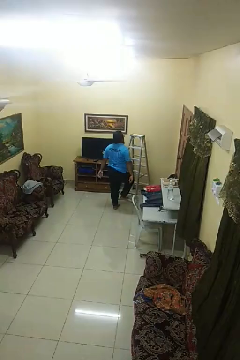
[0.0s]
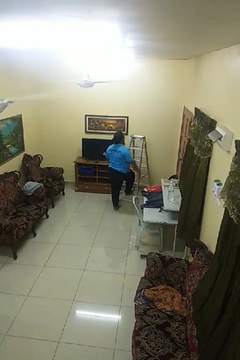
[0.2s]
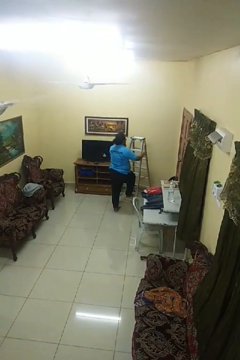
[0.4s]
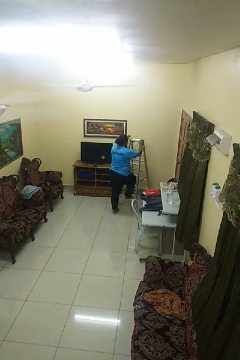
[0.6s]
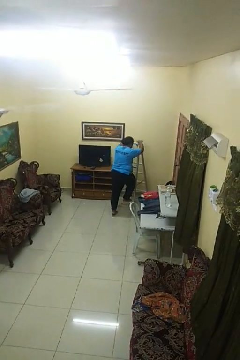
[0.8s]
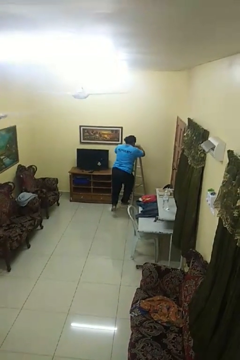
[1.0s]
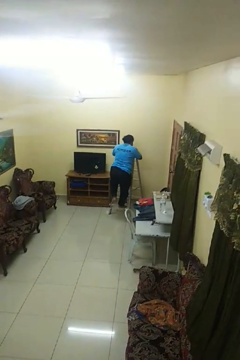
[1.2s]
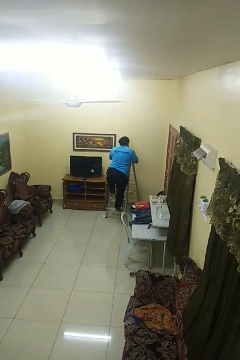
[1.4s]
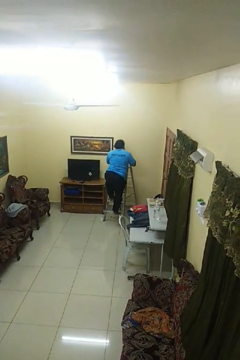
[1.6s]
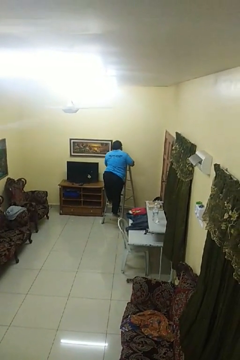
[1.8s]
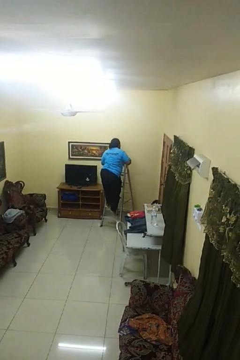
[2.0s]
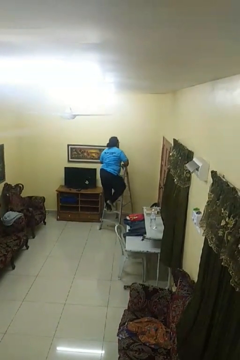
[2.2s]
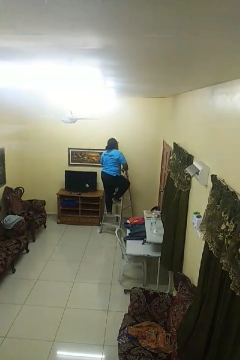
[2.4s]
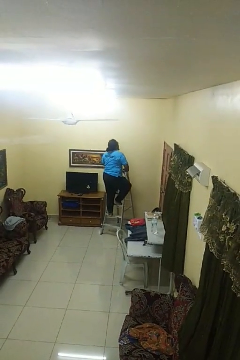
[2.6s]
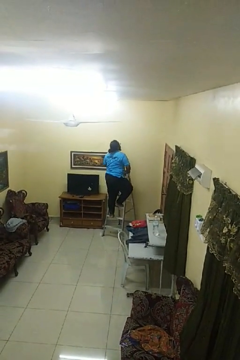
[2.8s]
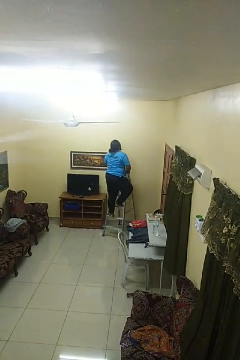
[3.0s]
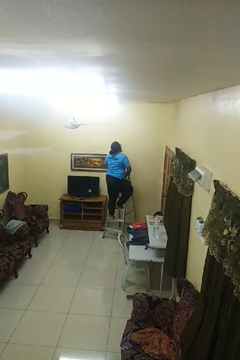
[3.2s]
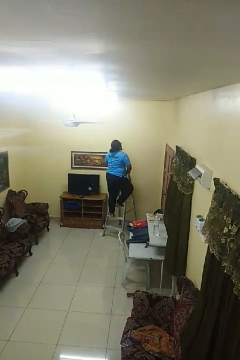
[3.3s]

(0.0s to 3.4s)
person climbs up ladder

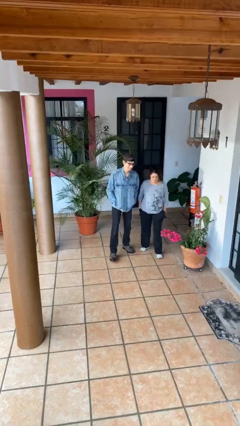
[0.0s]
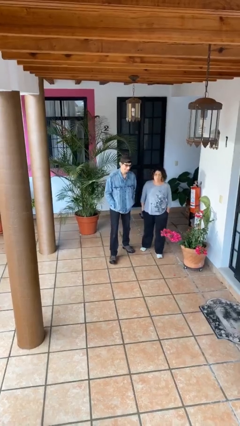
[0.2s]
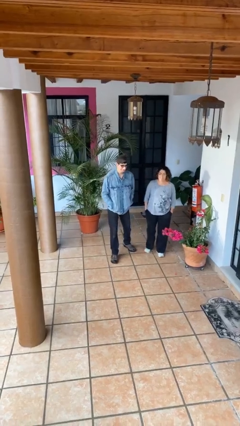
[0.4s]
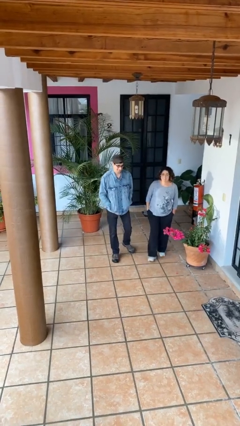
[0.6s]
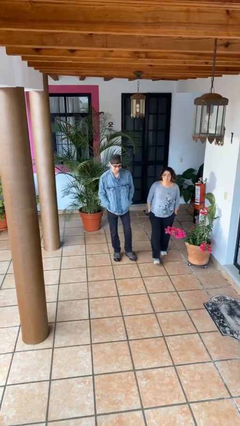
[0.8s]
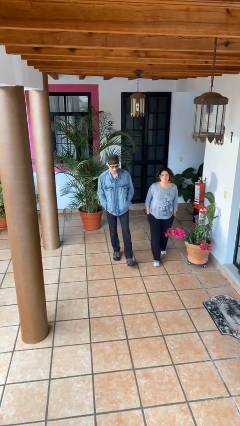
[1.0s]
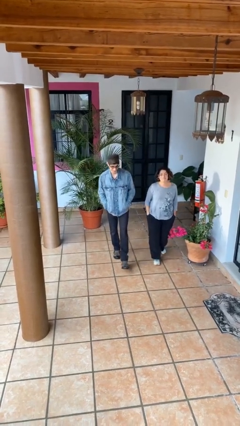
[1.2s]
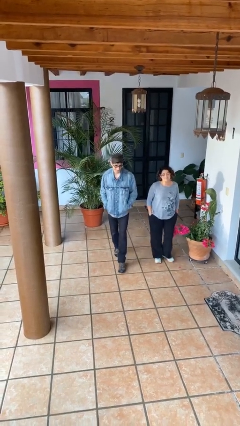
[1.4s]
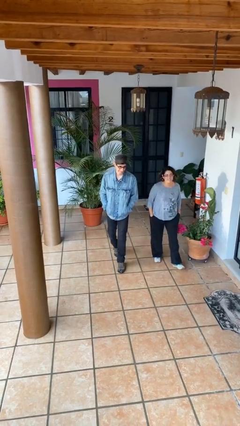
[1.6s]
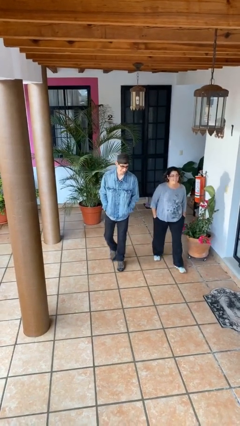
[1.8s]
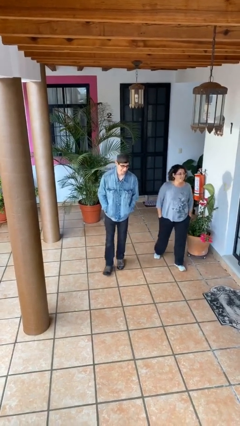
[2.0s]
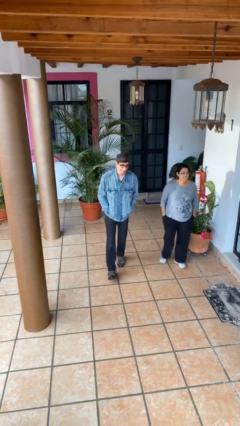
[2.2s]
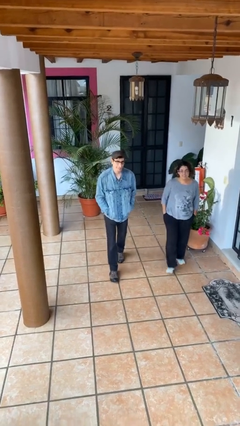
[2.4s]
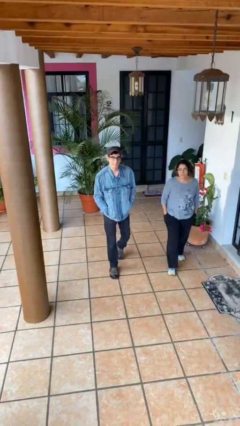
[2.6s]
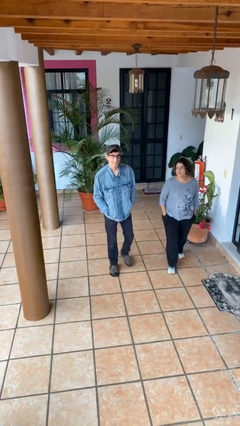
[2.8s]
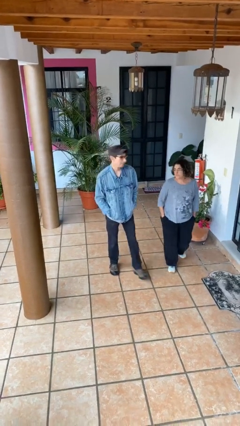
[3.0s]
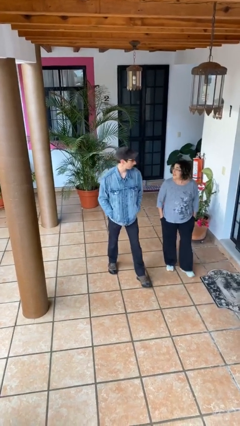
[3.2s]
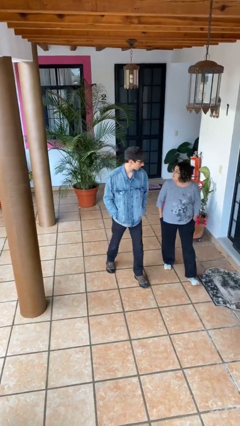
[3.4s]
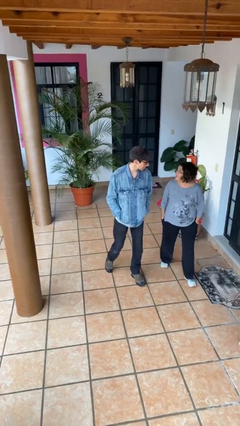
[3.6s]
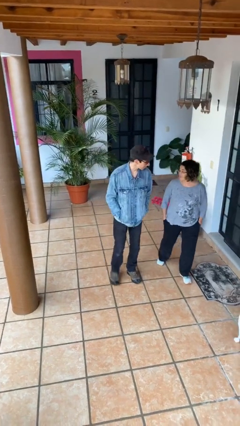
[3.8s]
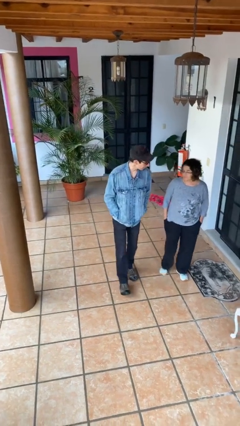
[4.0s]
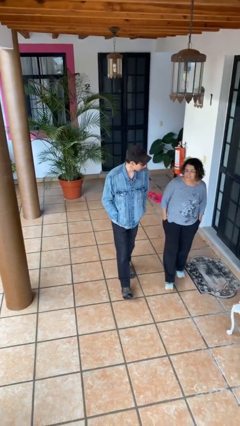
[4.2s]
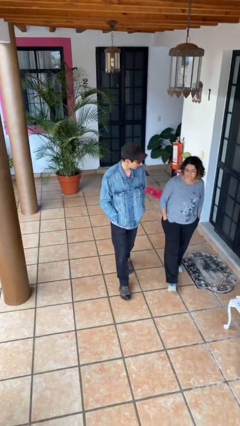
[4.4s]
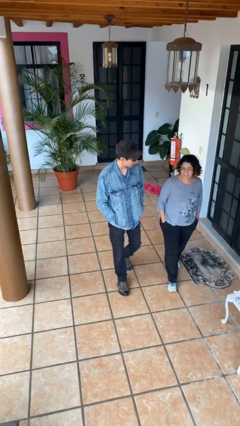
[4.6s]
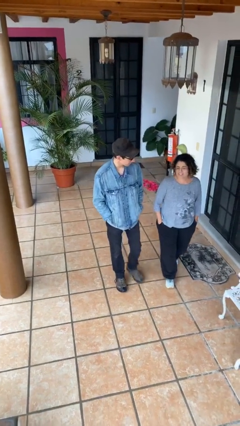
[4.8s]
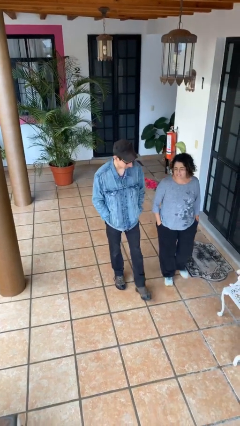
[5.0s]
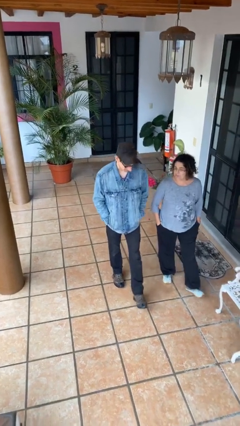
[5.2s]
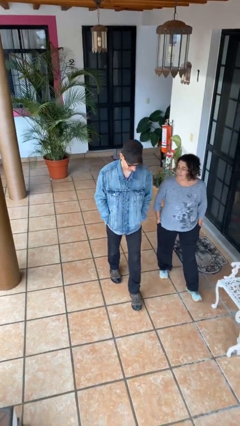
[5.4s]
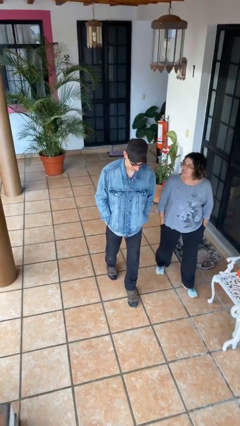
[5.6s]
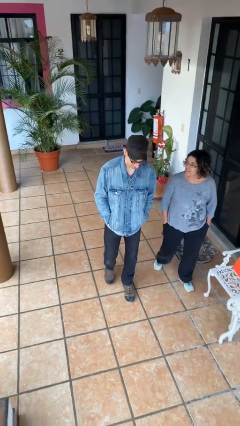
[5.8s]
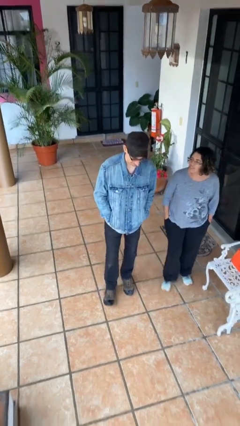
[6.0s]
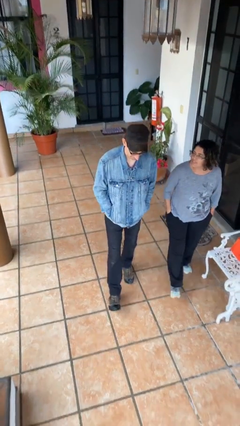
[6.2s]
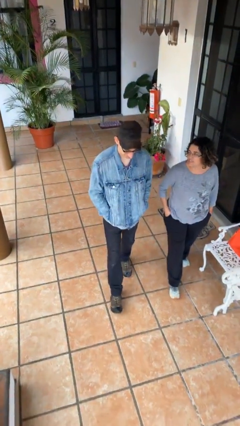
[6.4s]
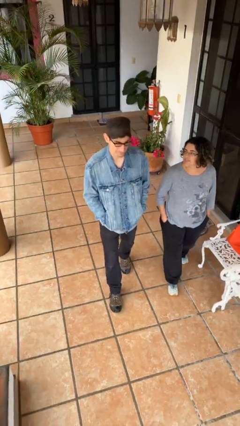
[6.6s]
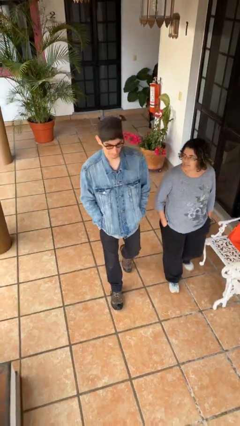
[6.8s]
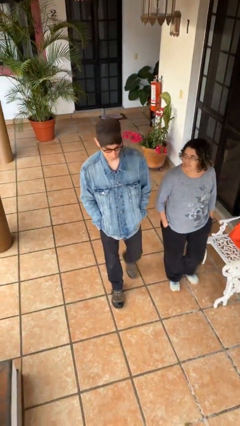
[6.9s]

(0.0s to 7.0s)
person talks to person

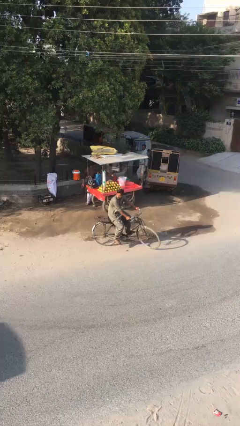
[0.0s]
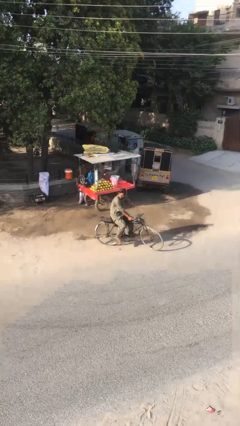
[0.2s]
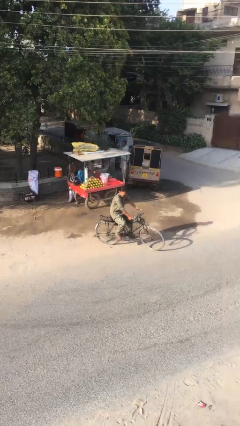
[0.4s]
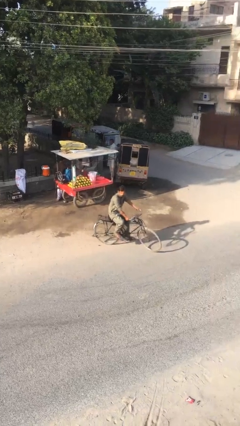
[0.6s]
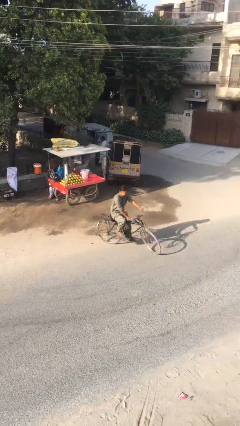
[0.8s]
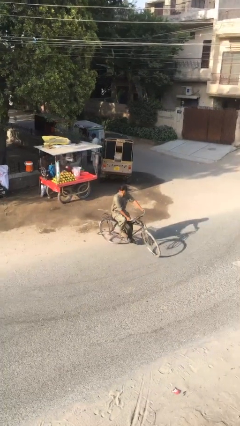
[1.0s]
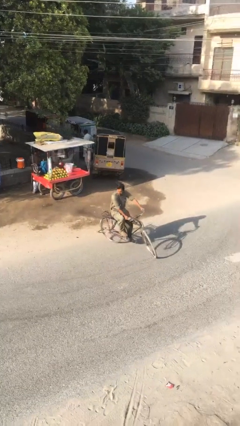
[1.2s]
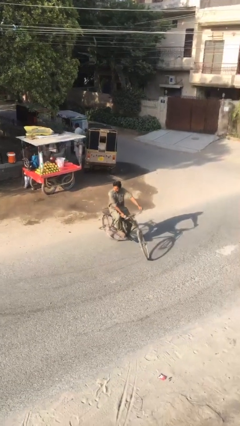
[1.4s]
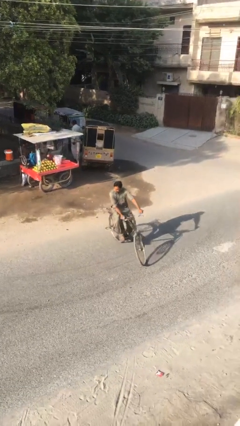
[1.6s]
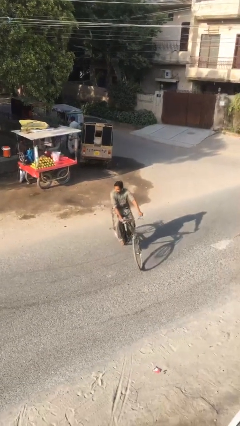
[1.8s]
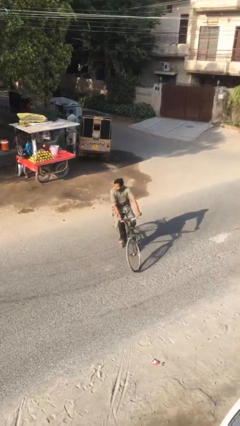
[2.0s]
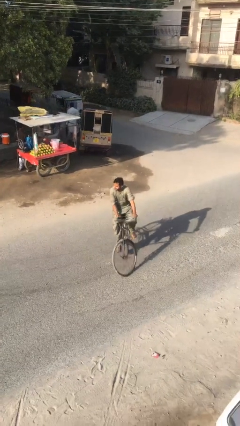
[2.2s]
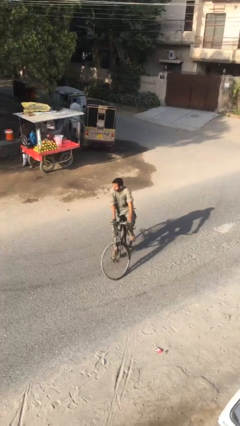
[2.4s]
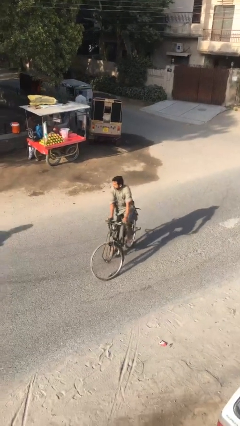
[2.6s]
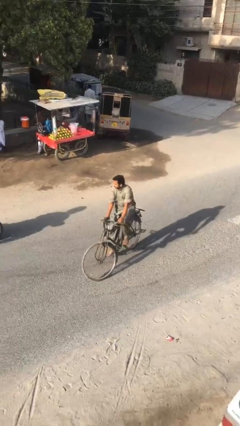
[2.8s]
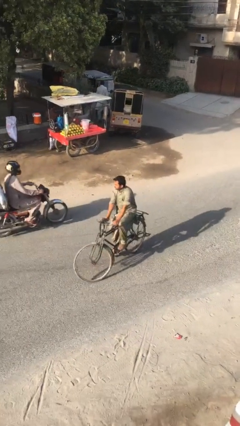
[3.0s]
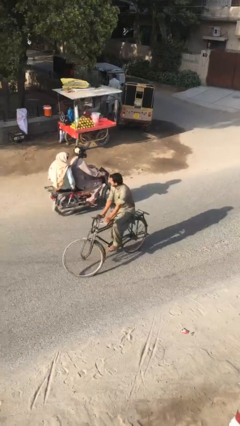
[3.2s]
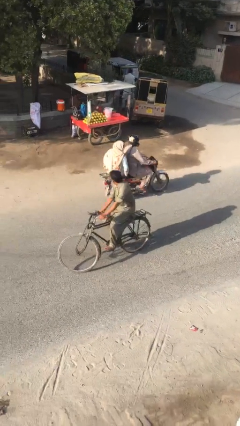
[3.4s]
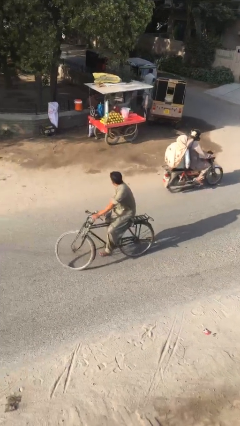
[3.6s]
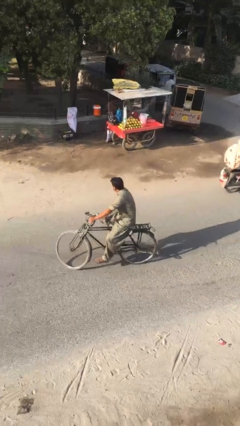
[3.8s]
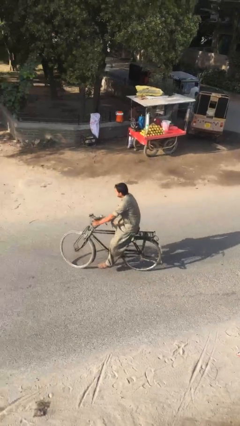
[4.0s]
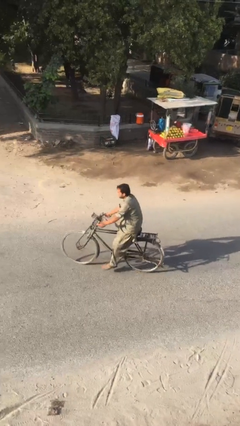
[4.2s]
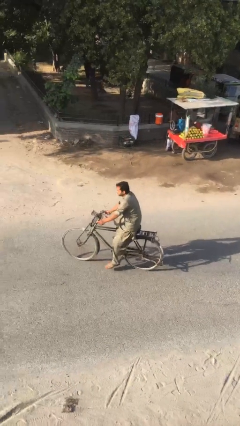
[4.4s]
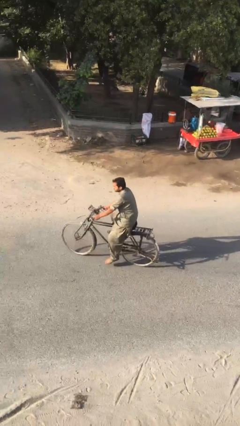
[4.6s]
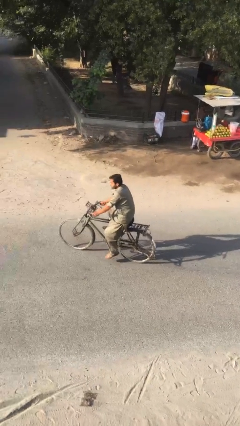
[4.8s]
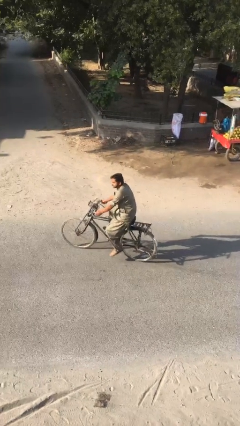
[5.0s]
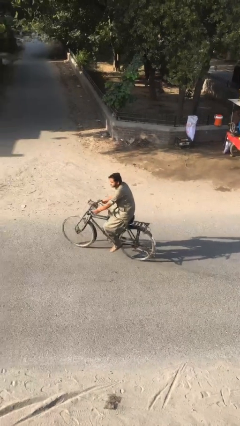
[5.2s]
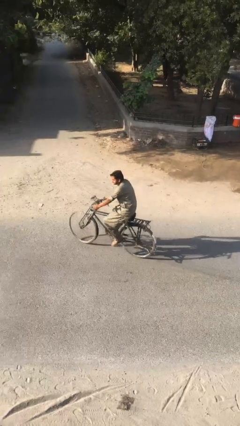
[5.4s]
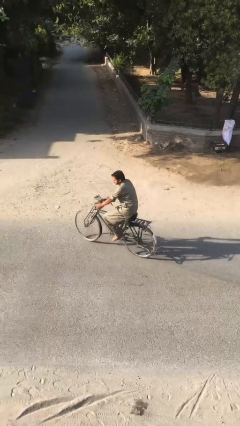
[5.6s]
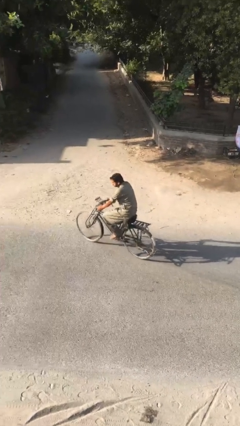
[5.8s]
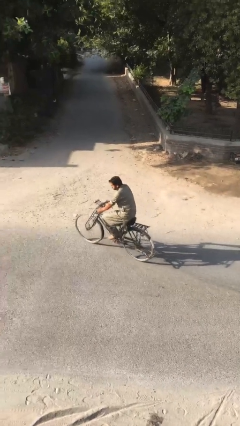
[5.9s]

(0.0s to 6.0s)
person rides bicycle

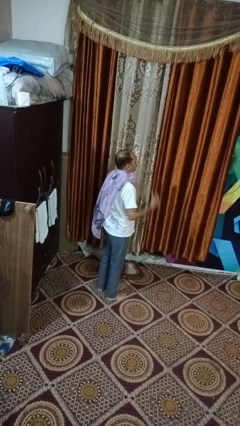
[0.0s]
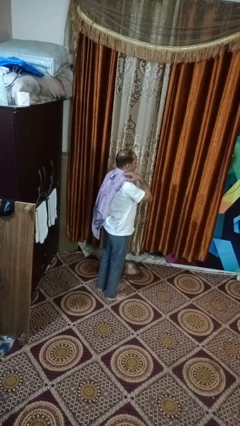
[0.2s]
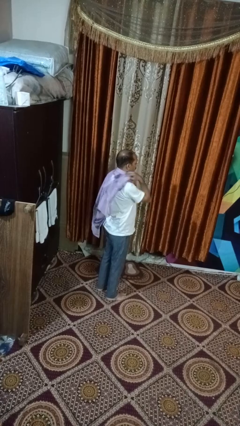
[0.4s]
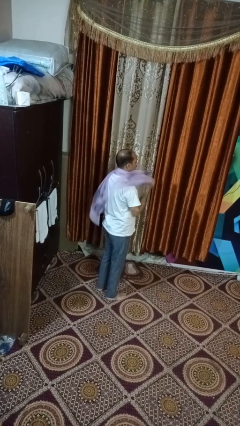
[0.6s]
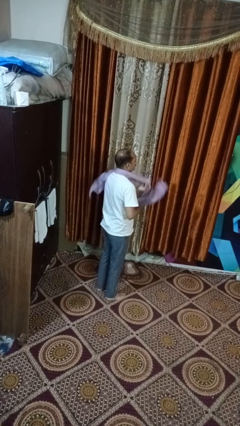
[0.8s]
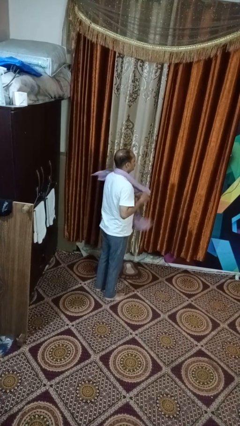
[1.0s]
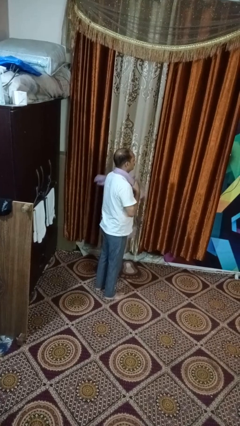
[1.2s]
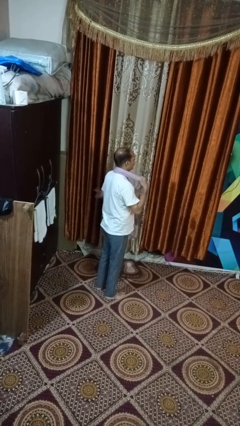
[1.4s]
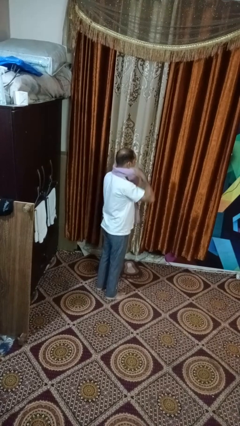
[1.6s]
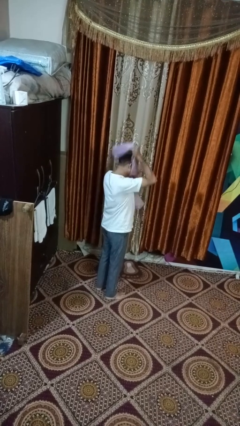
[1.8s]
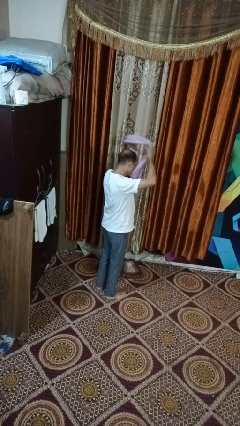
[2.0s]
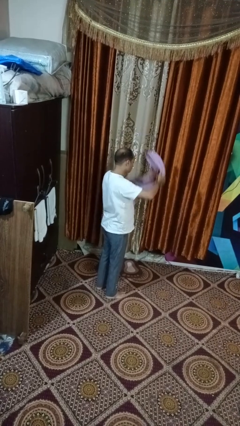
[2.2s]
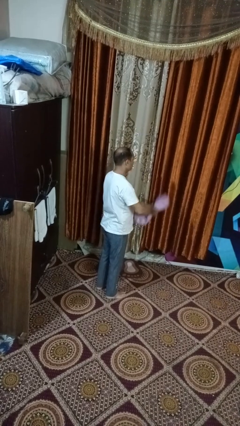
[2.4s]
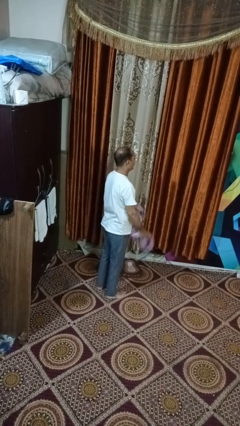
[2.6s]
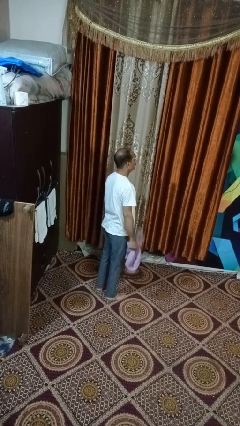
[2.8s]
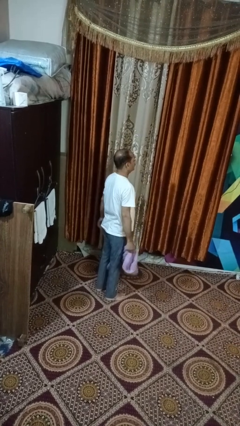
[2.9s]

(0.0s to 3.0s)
person takes off scarf
